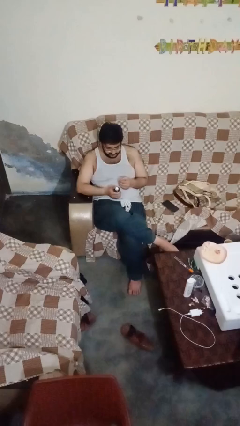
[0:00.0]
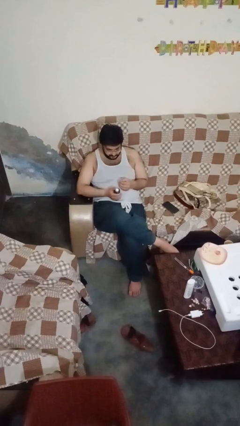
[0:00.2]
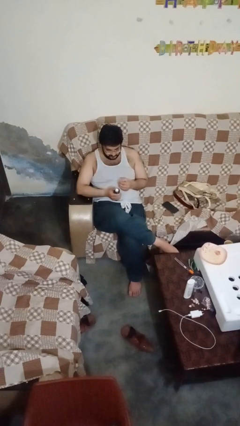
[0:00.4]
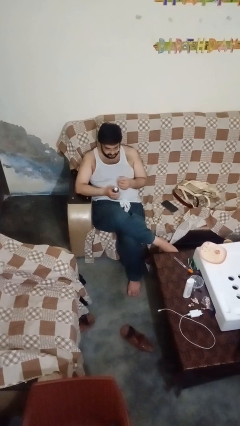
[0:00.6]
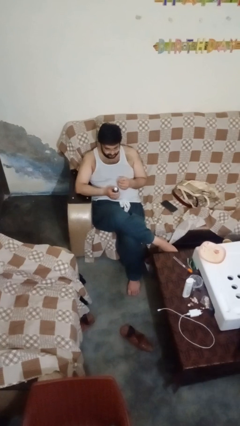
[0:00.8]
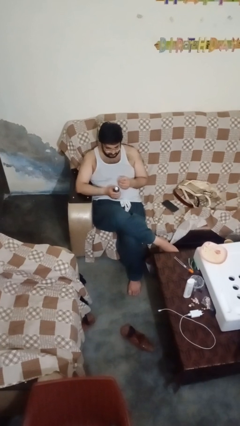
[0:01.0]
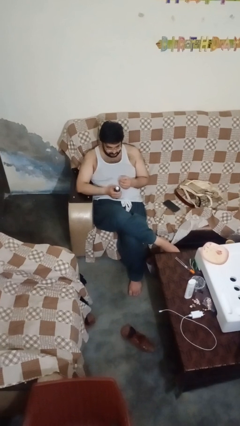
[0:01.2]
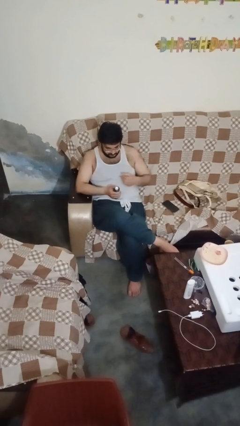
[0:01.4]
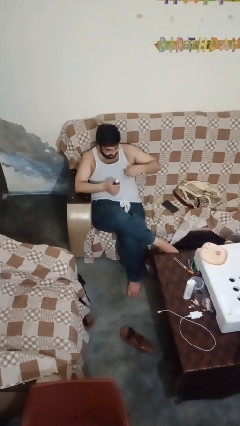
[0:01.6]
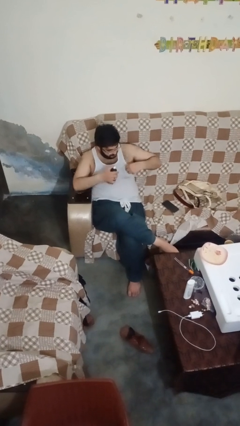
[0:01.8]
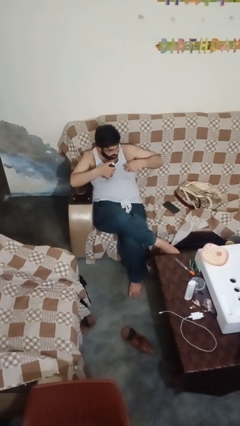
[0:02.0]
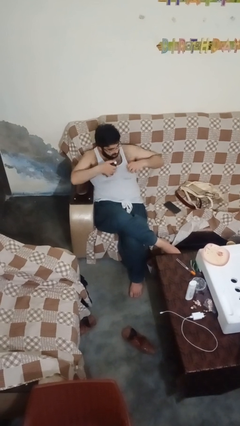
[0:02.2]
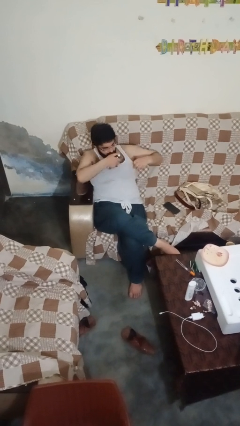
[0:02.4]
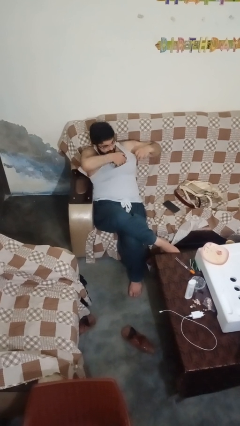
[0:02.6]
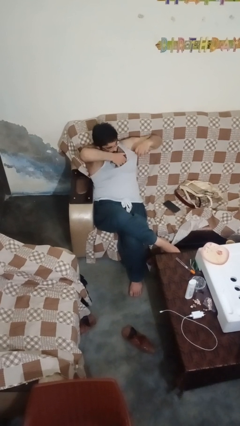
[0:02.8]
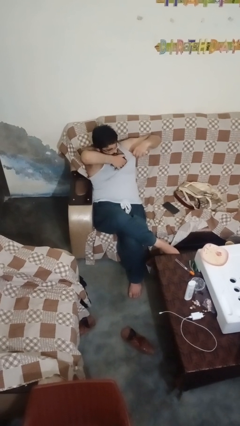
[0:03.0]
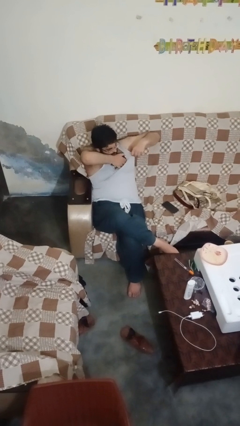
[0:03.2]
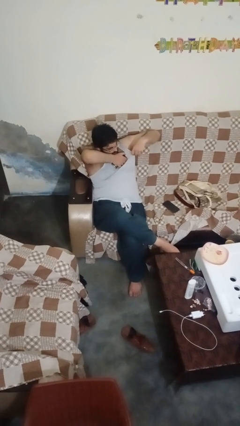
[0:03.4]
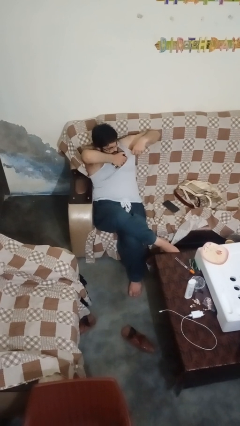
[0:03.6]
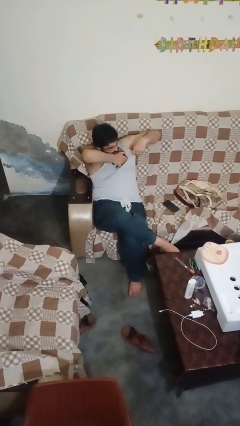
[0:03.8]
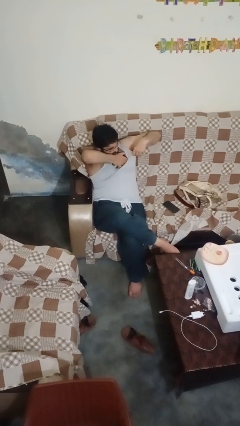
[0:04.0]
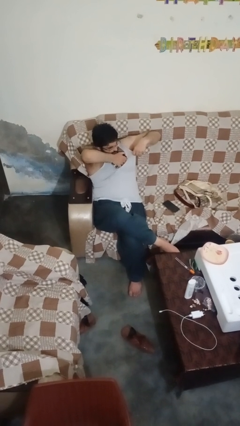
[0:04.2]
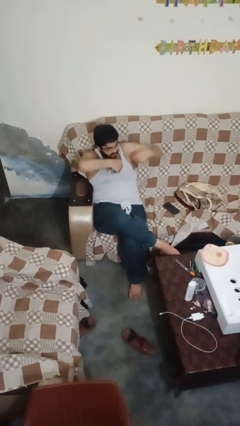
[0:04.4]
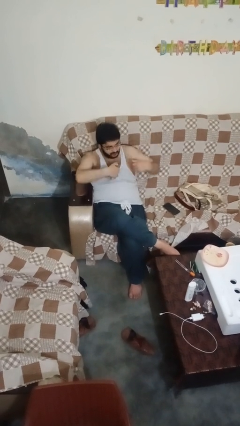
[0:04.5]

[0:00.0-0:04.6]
person applies deodorant

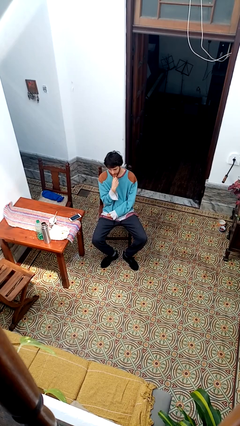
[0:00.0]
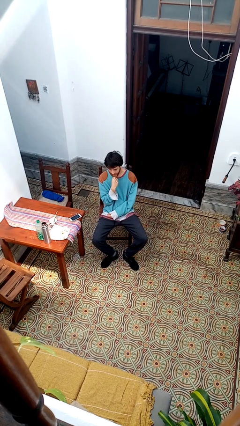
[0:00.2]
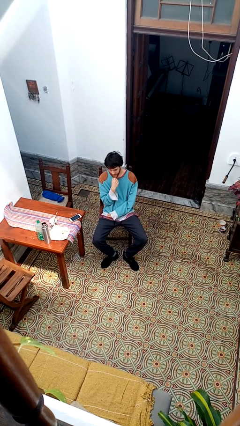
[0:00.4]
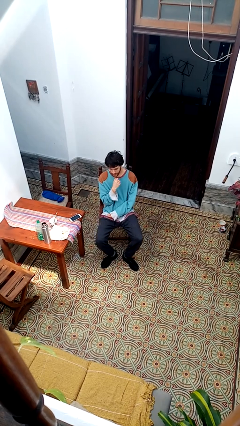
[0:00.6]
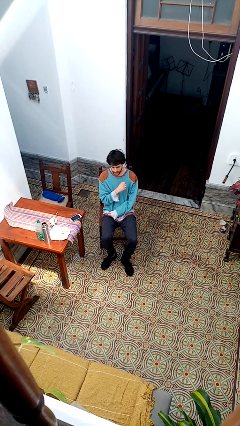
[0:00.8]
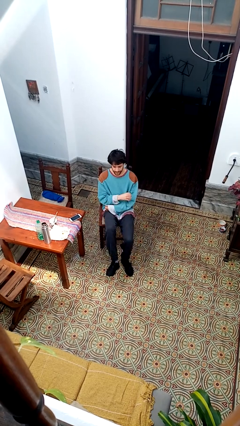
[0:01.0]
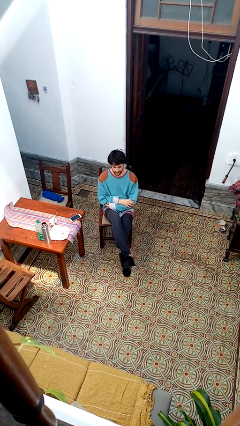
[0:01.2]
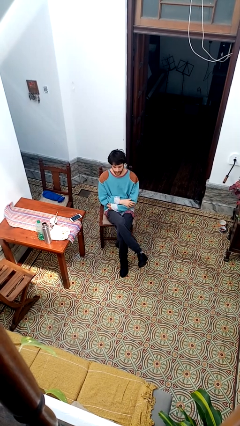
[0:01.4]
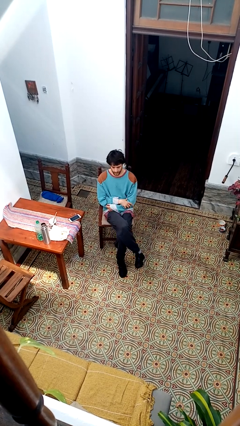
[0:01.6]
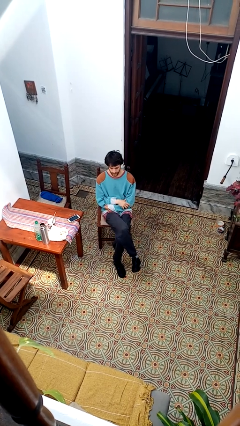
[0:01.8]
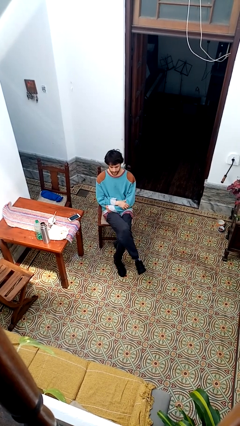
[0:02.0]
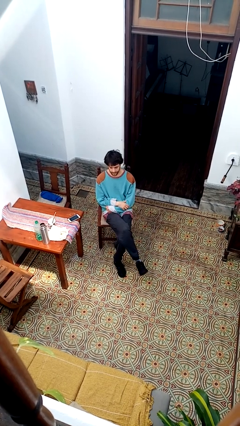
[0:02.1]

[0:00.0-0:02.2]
person crosses legs

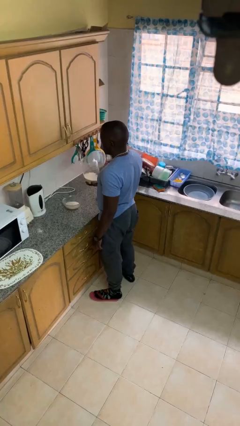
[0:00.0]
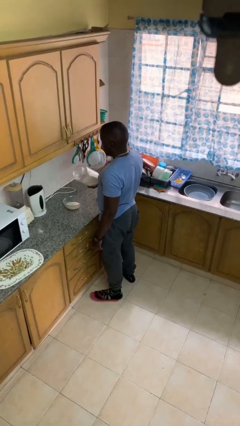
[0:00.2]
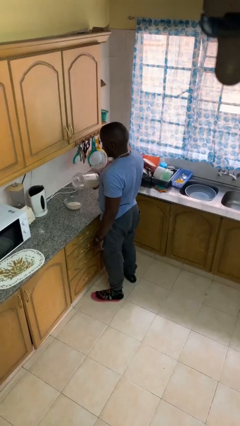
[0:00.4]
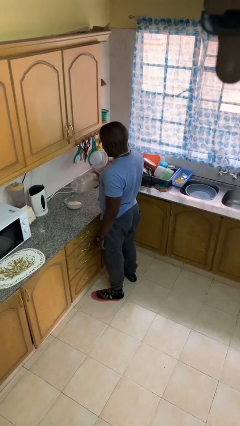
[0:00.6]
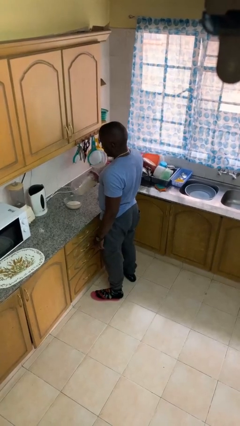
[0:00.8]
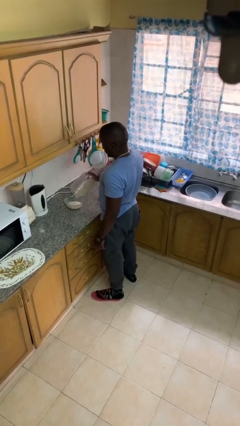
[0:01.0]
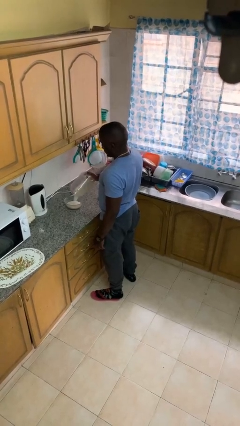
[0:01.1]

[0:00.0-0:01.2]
person pours into bowl

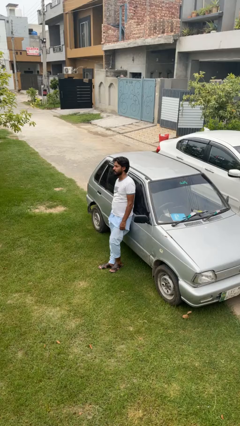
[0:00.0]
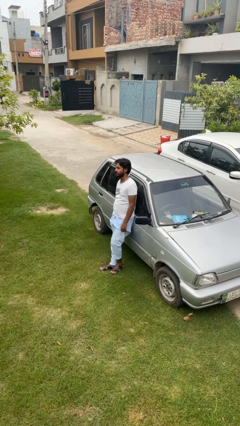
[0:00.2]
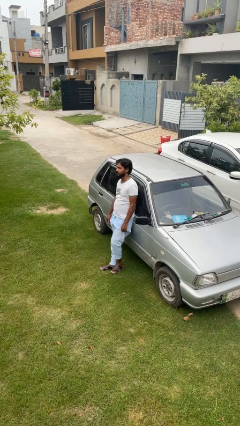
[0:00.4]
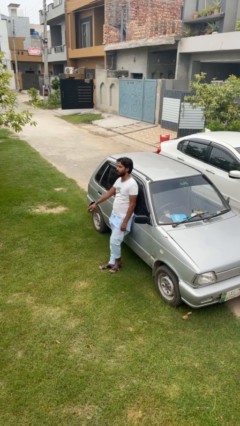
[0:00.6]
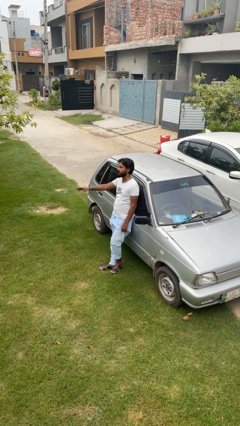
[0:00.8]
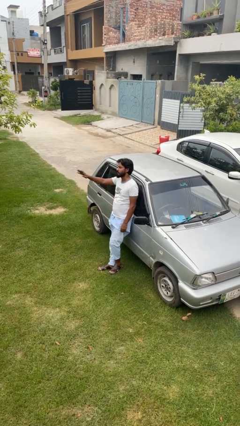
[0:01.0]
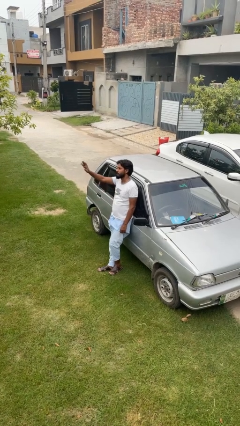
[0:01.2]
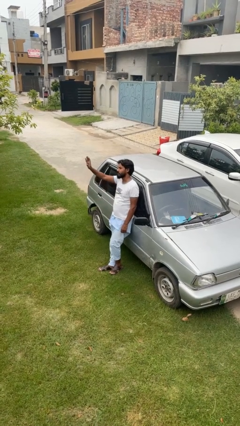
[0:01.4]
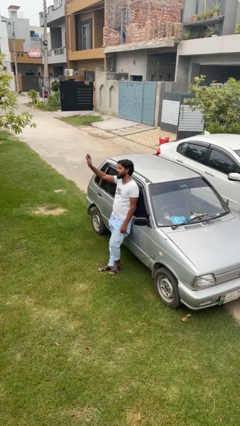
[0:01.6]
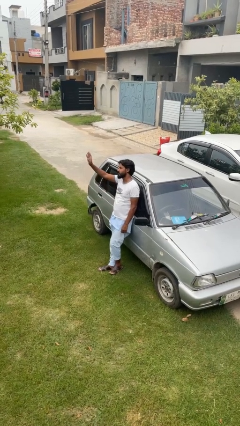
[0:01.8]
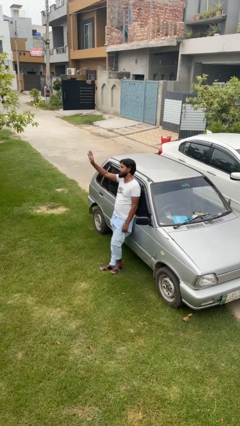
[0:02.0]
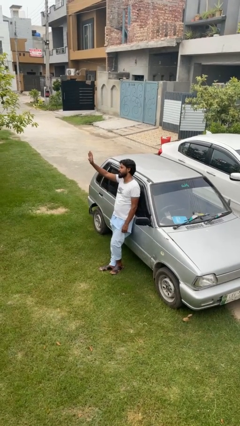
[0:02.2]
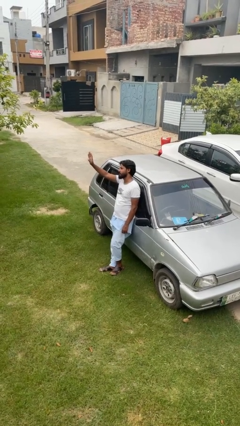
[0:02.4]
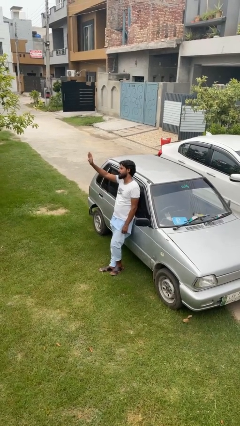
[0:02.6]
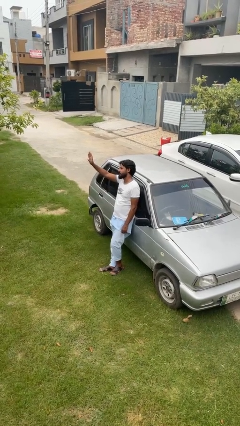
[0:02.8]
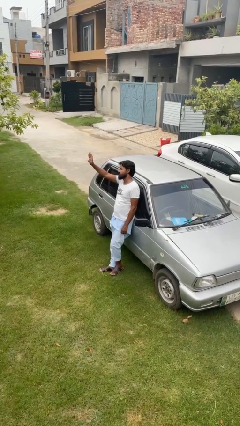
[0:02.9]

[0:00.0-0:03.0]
person gestures raise hand

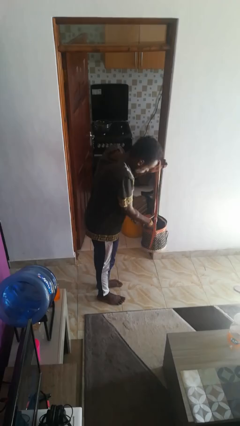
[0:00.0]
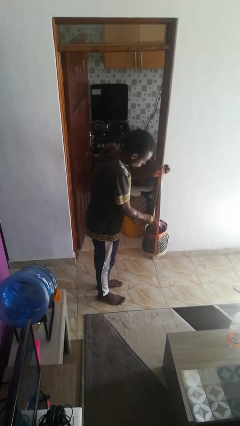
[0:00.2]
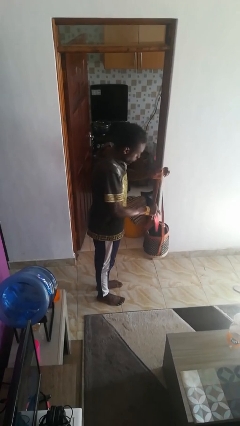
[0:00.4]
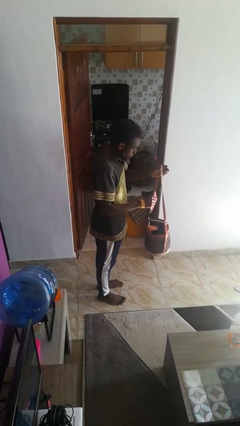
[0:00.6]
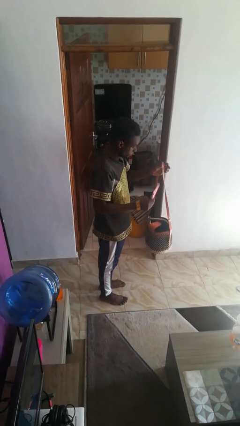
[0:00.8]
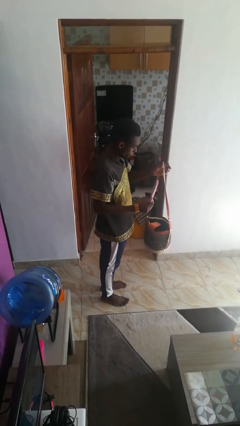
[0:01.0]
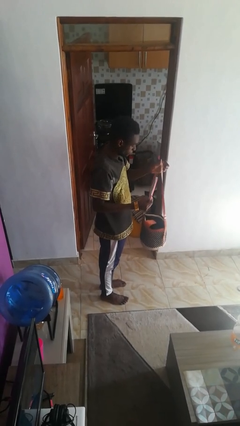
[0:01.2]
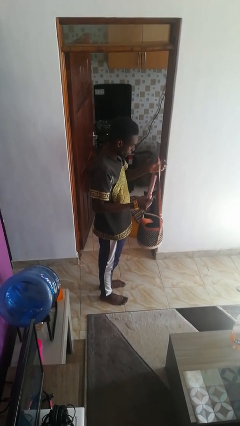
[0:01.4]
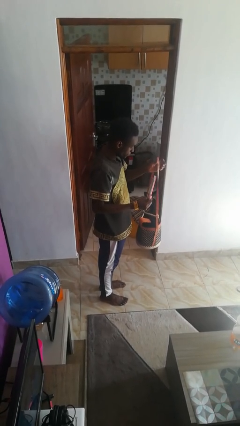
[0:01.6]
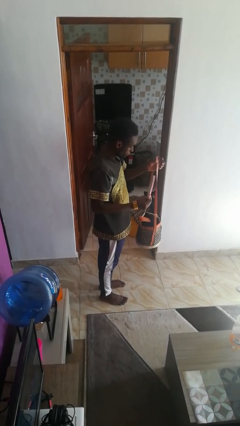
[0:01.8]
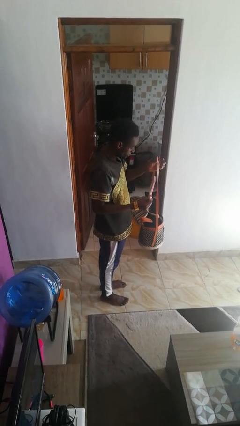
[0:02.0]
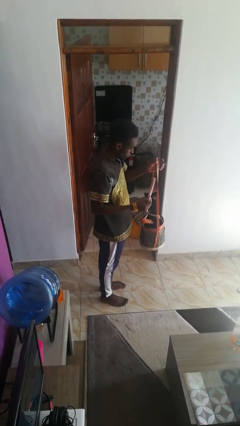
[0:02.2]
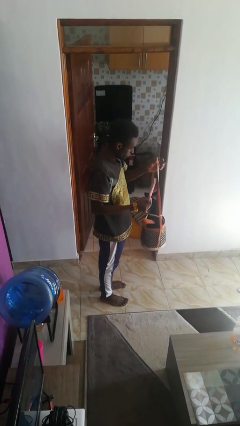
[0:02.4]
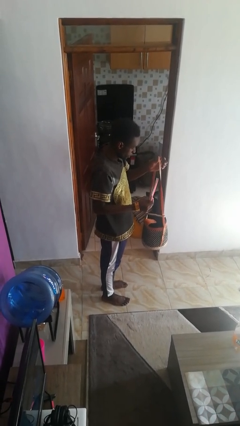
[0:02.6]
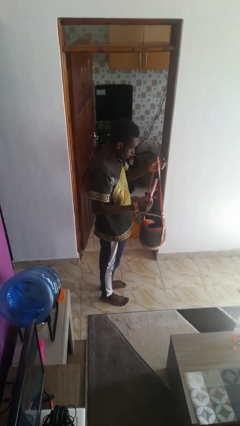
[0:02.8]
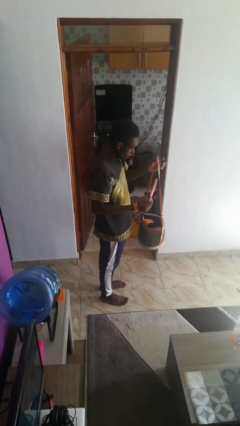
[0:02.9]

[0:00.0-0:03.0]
person takes object from purse

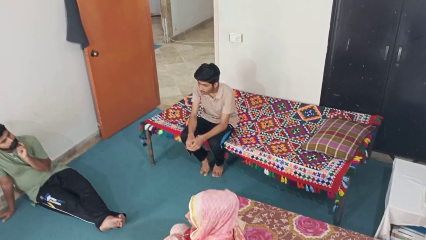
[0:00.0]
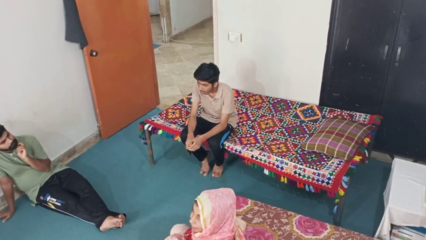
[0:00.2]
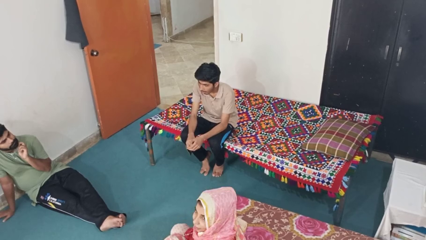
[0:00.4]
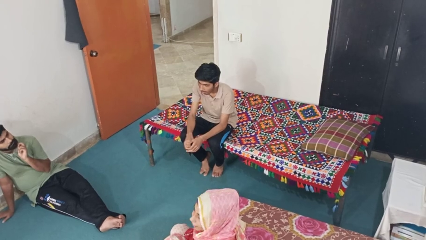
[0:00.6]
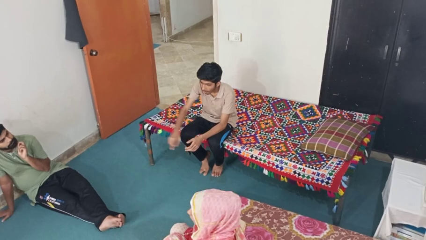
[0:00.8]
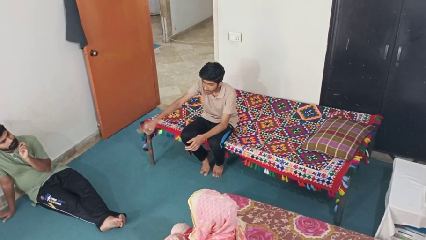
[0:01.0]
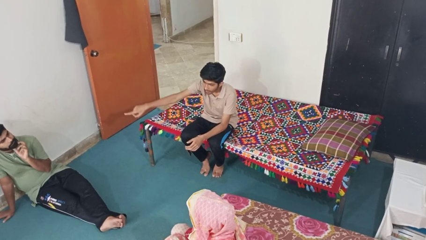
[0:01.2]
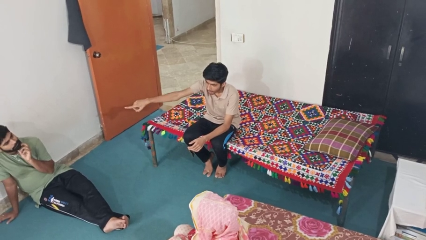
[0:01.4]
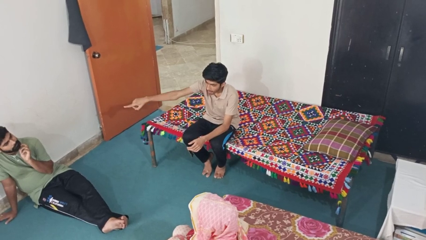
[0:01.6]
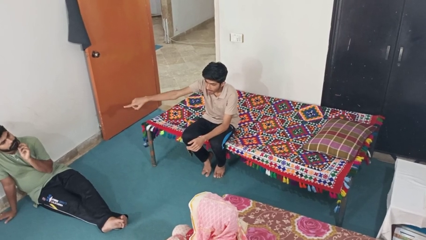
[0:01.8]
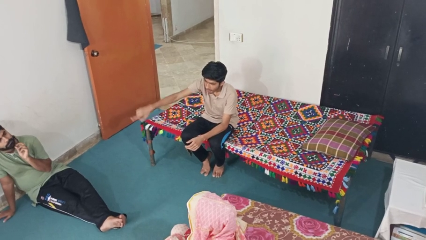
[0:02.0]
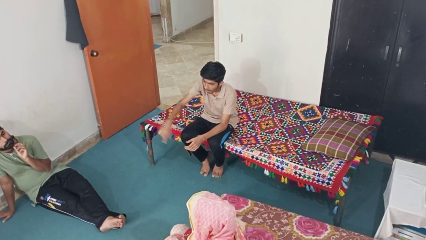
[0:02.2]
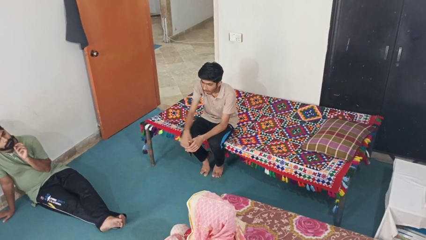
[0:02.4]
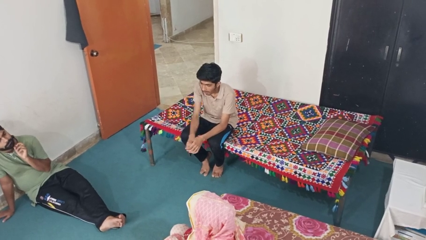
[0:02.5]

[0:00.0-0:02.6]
person points at person

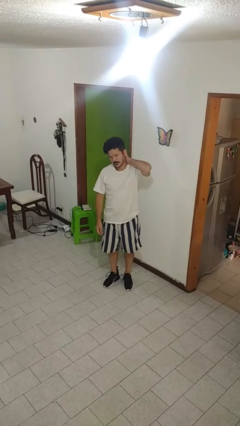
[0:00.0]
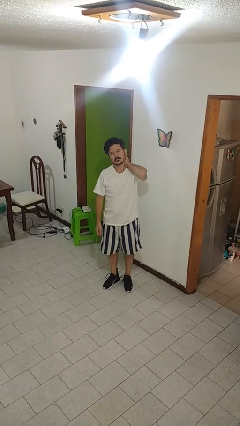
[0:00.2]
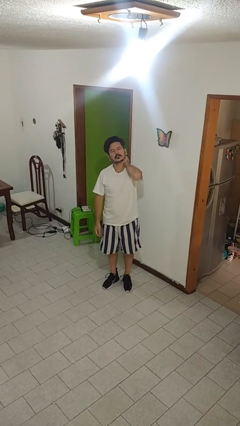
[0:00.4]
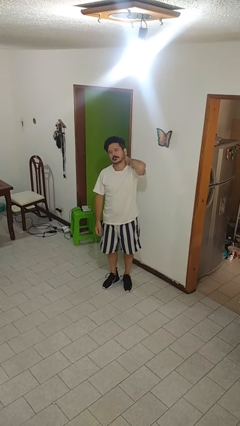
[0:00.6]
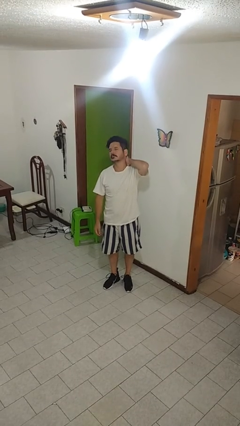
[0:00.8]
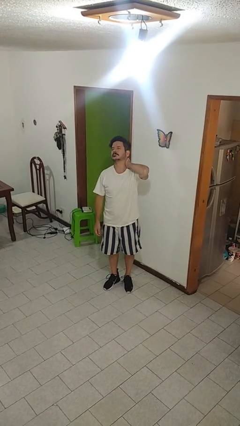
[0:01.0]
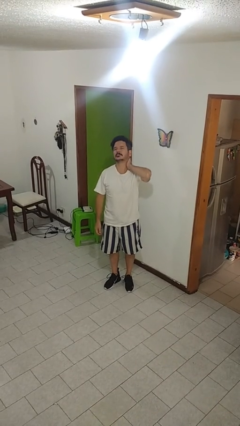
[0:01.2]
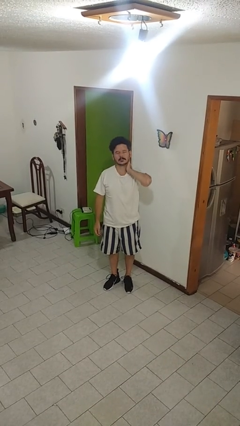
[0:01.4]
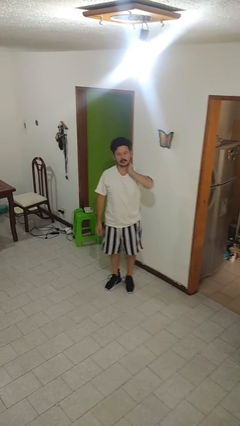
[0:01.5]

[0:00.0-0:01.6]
person rubs neck
